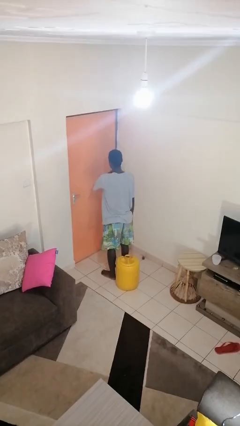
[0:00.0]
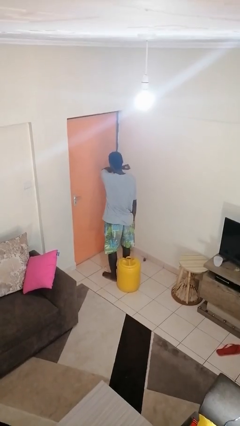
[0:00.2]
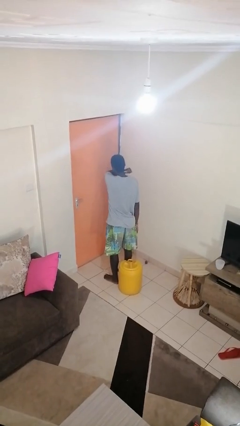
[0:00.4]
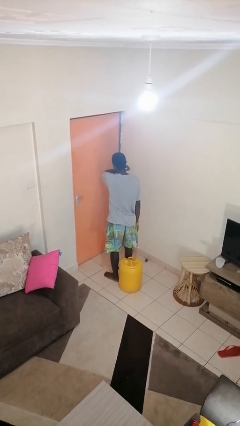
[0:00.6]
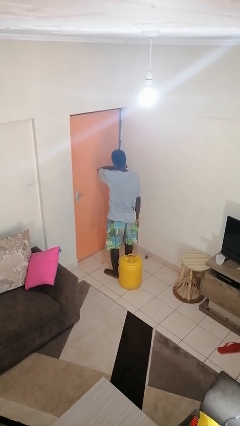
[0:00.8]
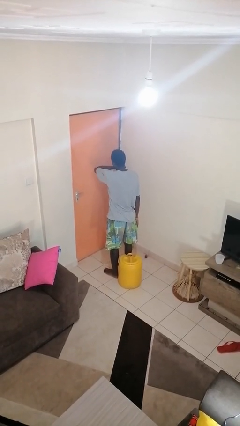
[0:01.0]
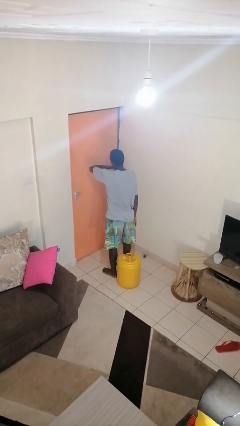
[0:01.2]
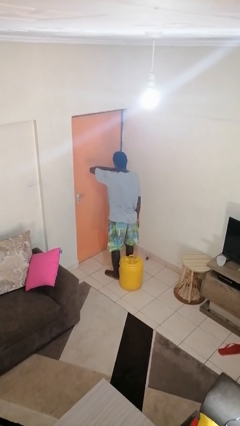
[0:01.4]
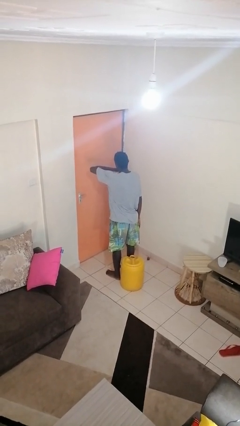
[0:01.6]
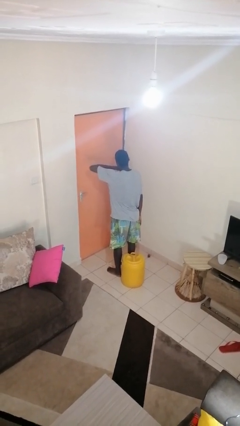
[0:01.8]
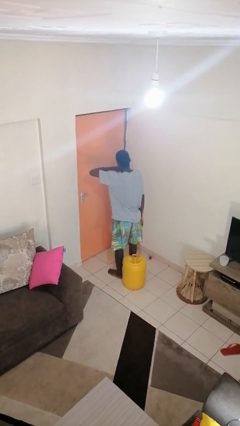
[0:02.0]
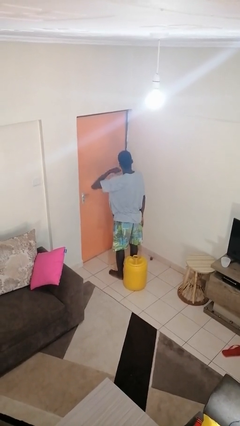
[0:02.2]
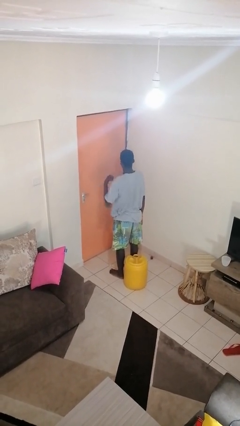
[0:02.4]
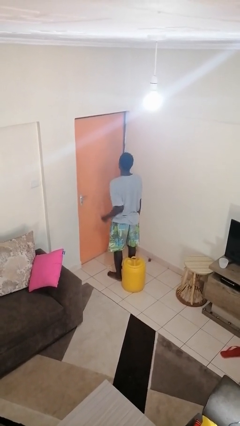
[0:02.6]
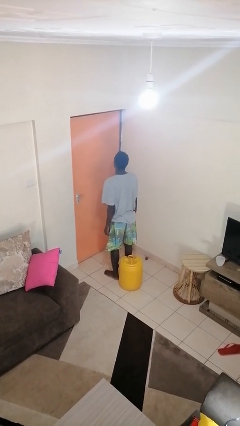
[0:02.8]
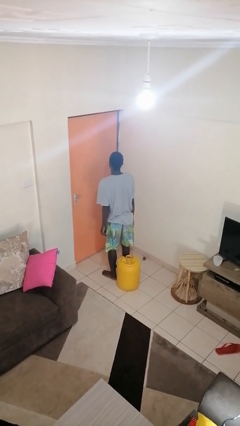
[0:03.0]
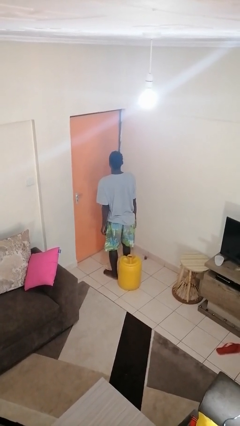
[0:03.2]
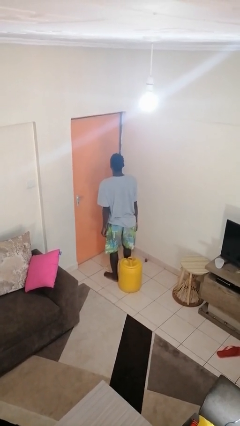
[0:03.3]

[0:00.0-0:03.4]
person gestures cut

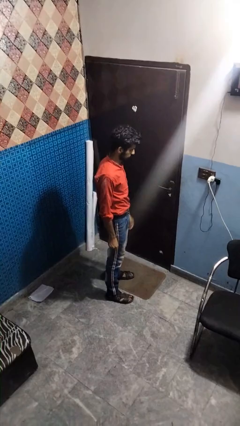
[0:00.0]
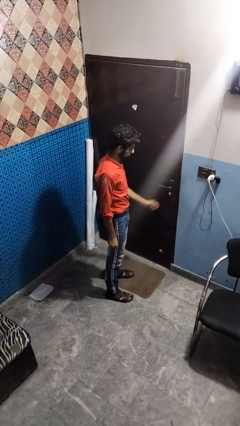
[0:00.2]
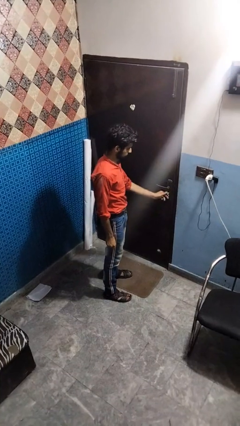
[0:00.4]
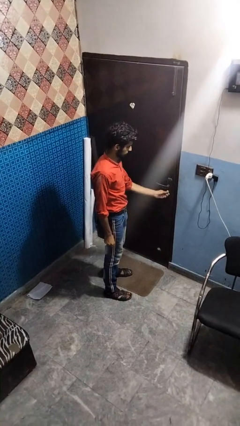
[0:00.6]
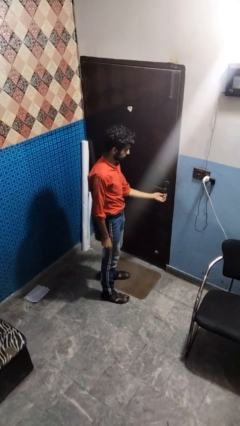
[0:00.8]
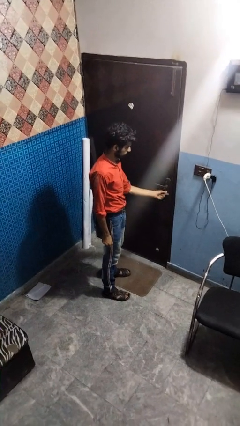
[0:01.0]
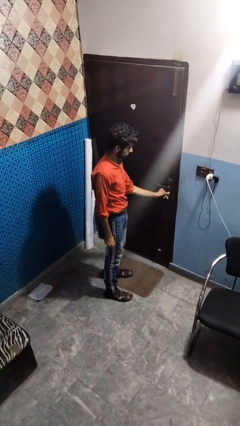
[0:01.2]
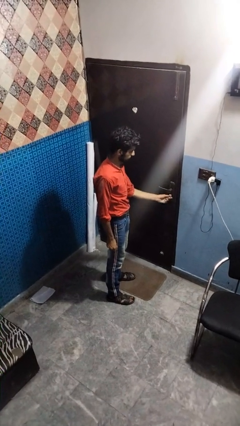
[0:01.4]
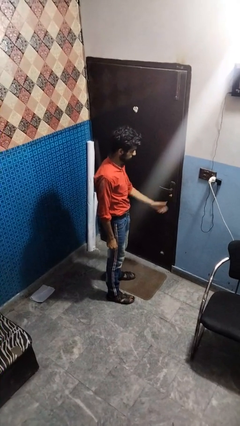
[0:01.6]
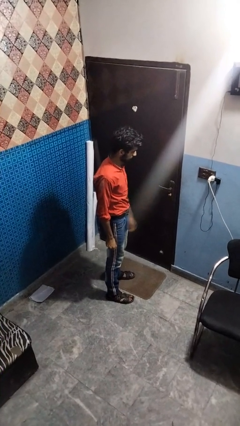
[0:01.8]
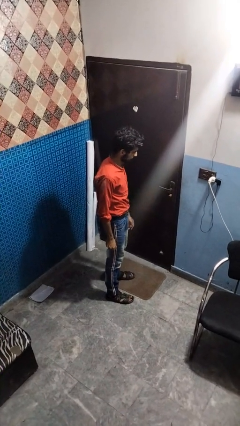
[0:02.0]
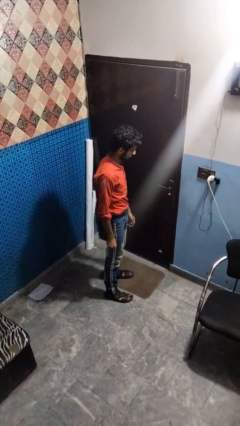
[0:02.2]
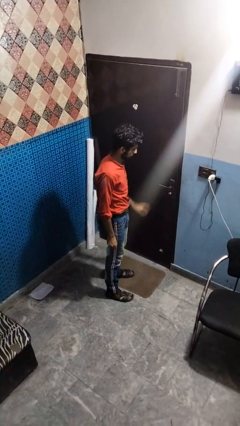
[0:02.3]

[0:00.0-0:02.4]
person unlocks door with keys

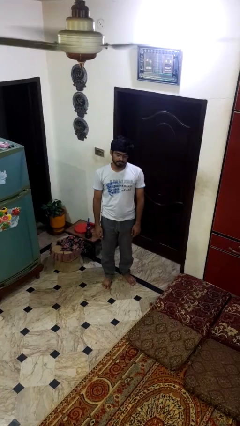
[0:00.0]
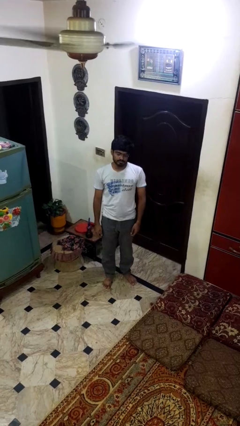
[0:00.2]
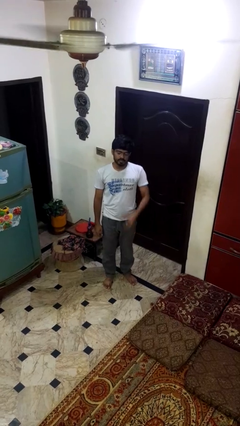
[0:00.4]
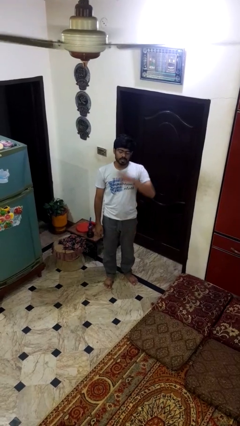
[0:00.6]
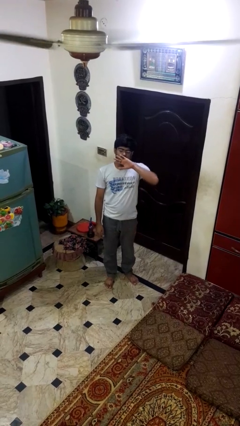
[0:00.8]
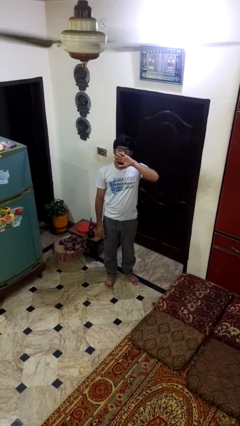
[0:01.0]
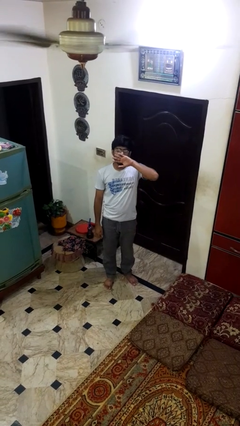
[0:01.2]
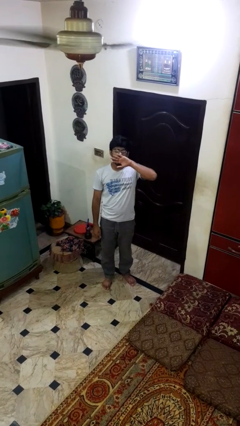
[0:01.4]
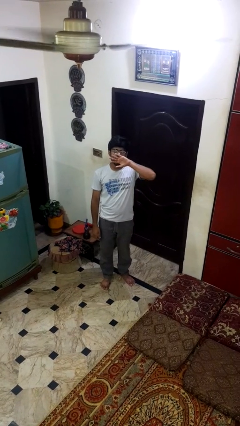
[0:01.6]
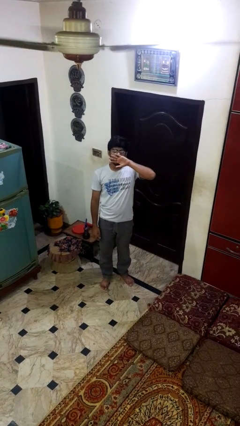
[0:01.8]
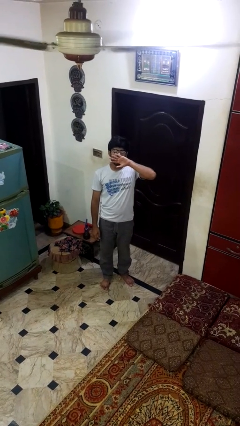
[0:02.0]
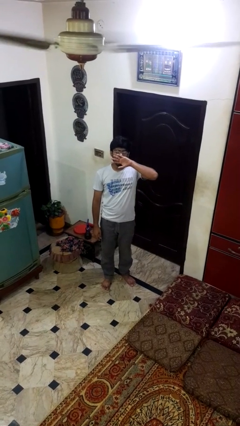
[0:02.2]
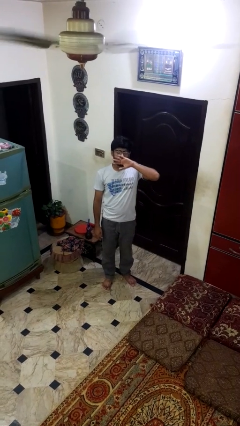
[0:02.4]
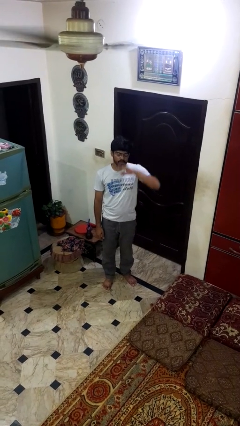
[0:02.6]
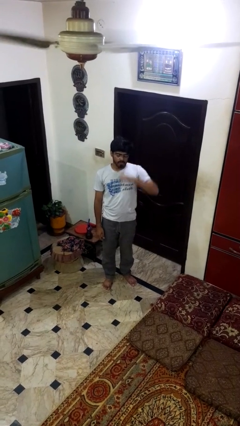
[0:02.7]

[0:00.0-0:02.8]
person yawns

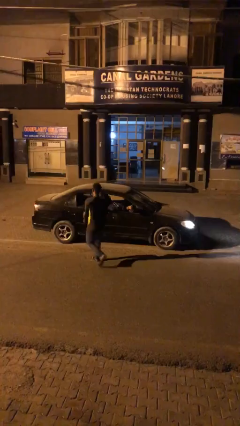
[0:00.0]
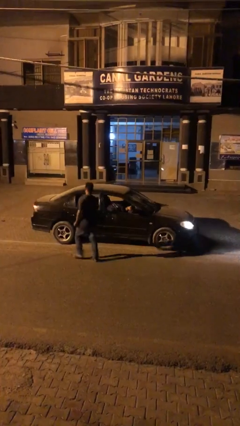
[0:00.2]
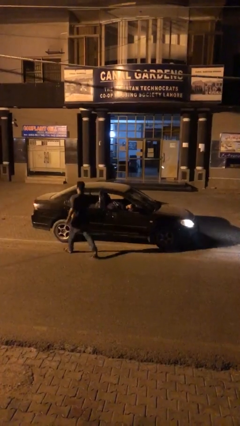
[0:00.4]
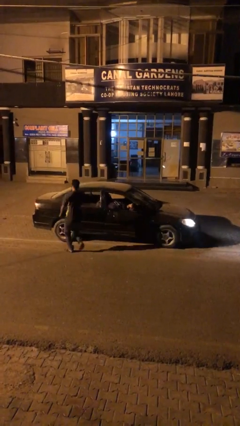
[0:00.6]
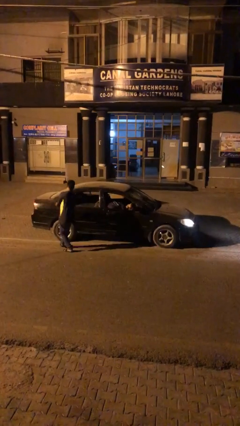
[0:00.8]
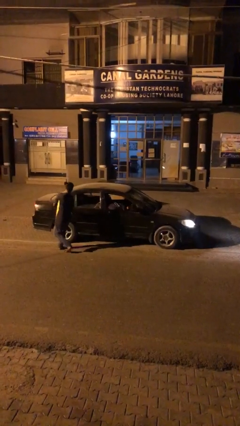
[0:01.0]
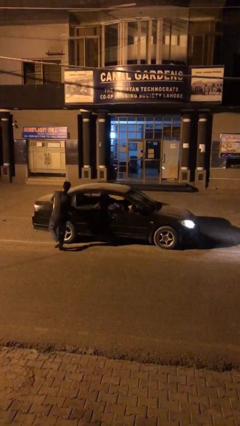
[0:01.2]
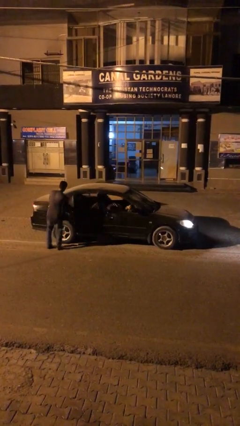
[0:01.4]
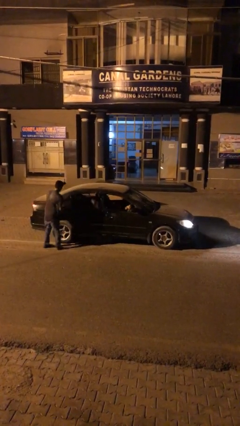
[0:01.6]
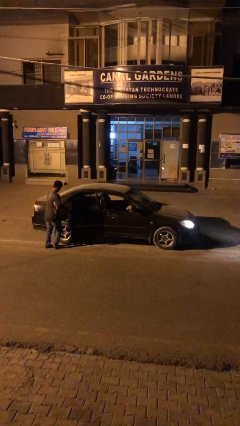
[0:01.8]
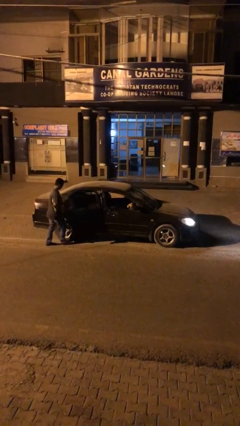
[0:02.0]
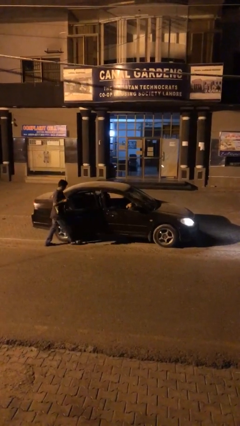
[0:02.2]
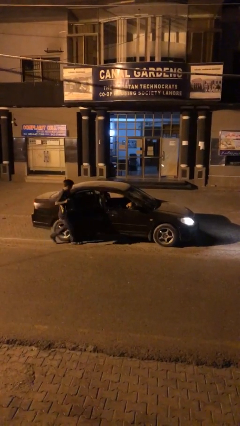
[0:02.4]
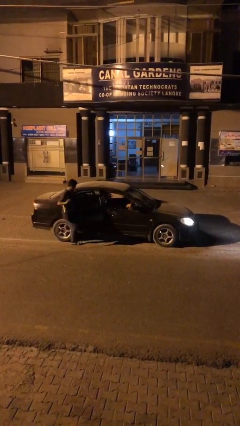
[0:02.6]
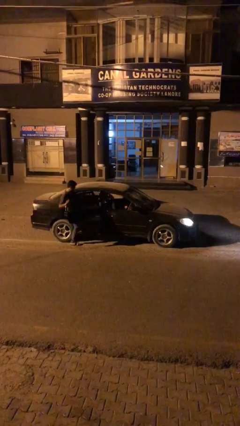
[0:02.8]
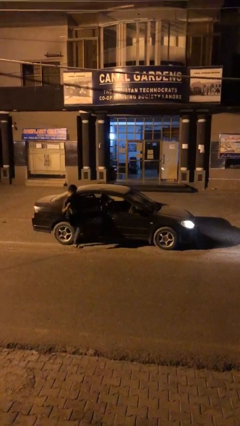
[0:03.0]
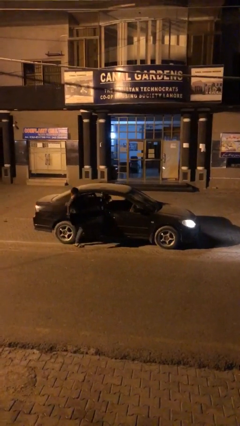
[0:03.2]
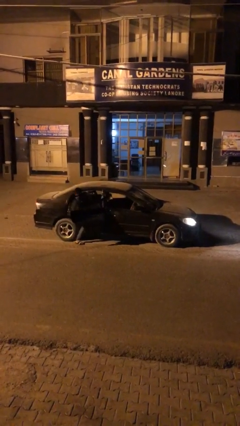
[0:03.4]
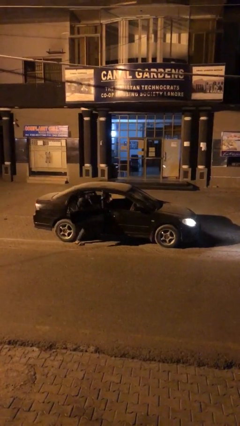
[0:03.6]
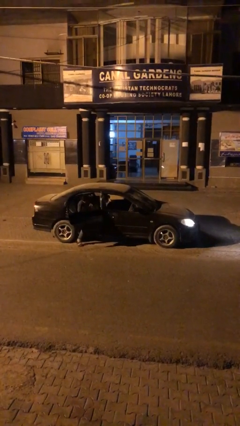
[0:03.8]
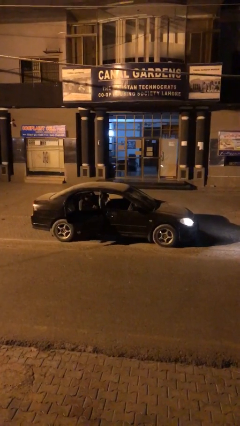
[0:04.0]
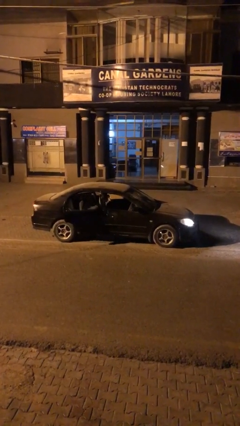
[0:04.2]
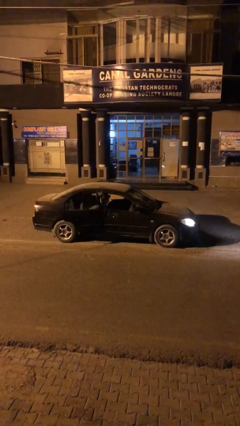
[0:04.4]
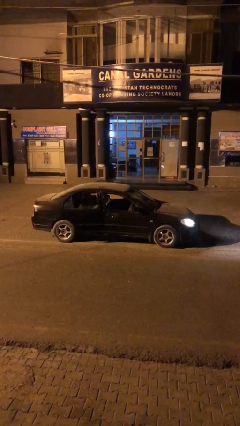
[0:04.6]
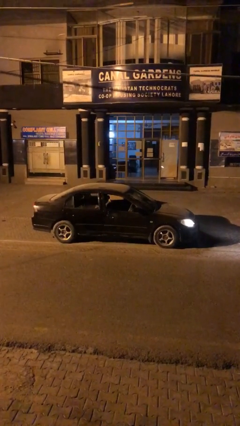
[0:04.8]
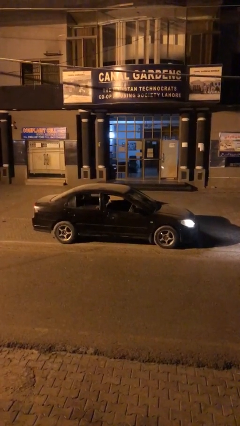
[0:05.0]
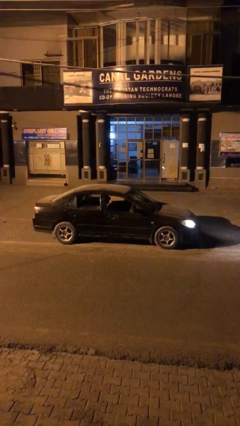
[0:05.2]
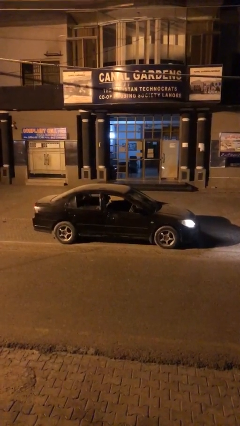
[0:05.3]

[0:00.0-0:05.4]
car picks up person

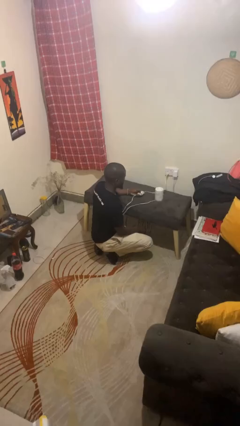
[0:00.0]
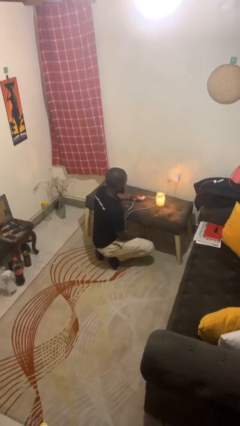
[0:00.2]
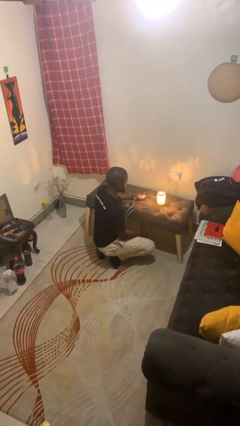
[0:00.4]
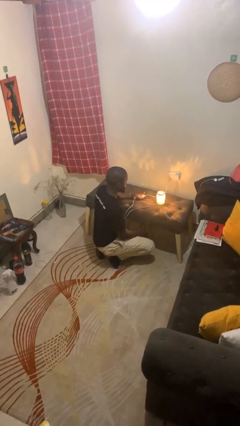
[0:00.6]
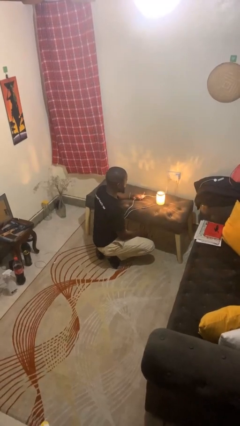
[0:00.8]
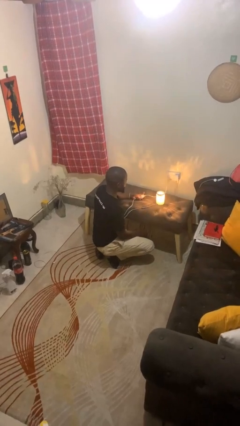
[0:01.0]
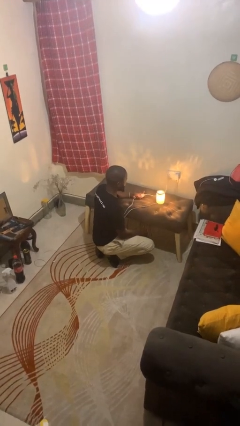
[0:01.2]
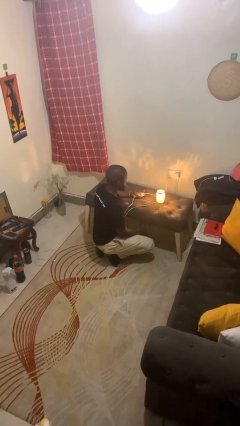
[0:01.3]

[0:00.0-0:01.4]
person turns on lamp

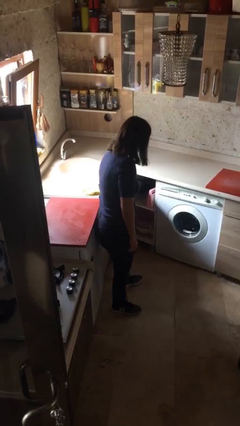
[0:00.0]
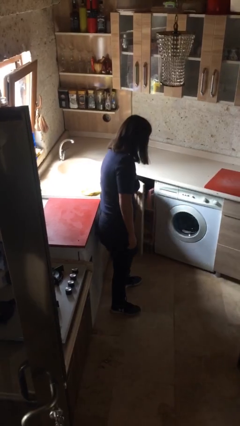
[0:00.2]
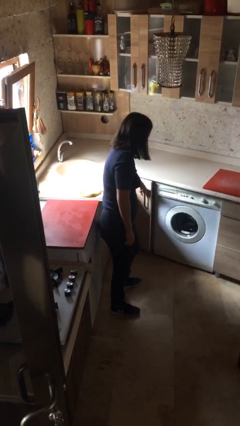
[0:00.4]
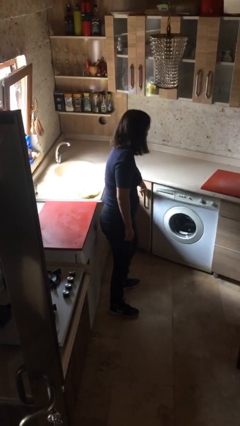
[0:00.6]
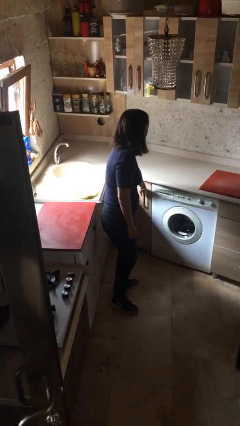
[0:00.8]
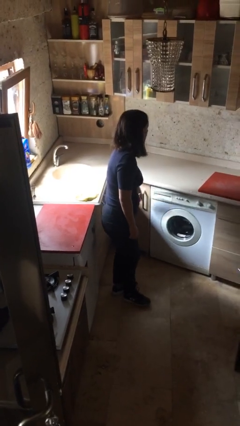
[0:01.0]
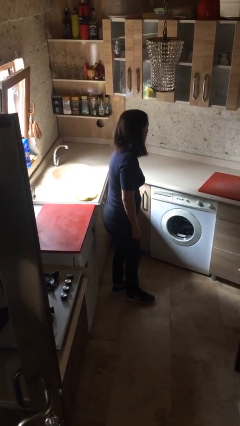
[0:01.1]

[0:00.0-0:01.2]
person closes cabinet

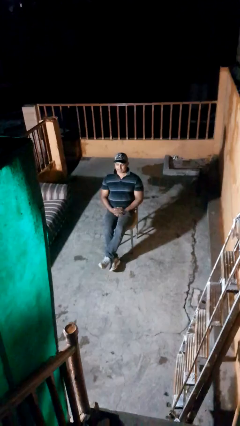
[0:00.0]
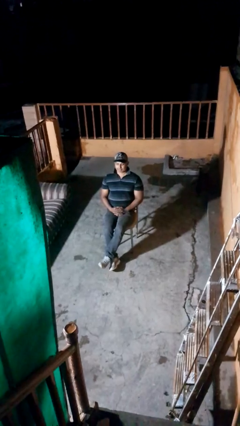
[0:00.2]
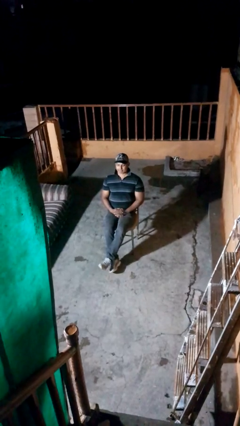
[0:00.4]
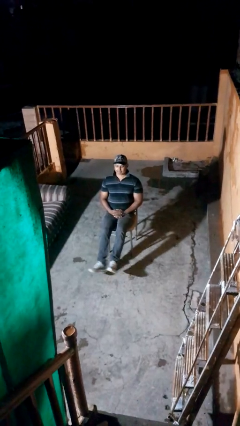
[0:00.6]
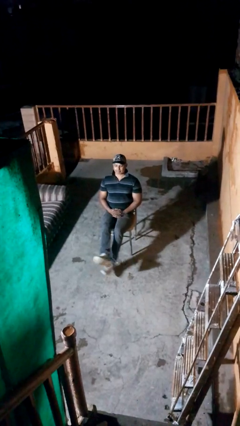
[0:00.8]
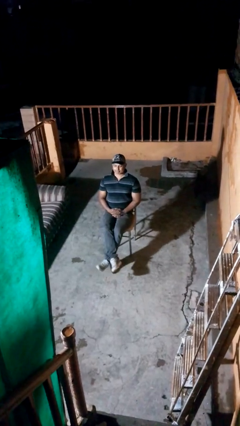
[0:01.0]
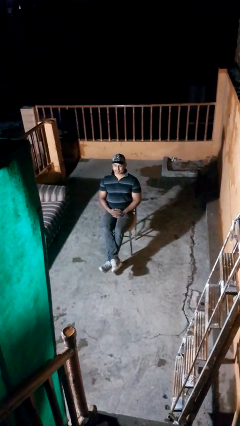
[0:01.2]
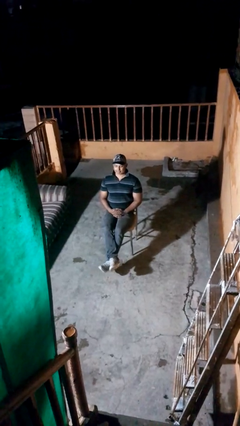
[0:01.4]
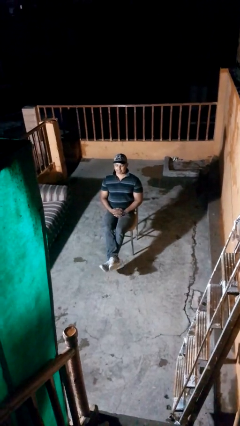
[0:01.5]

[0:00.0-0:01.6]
person crosses legs
